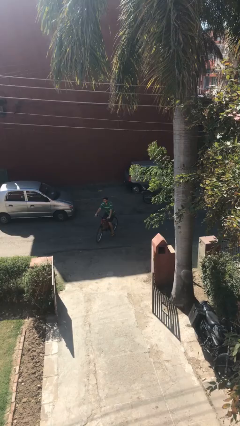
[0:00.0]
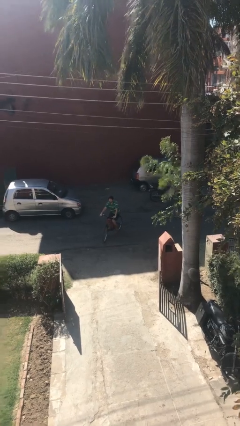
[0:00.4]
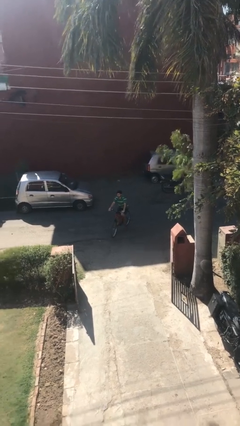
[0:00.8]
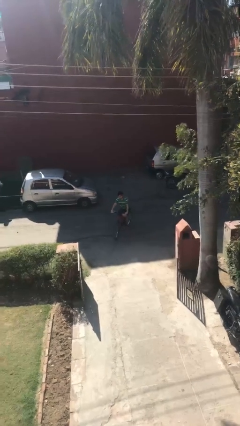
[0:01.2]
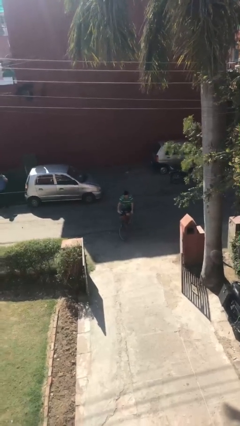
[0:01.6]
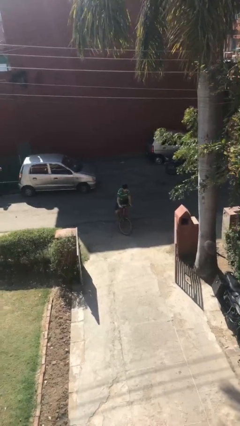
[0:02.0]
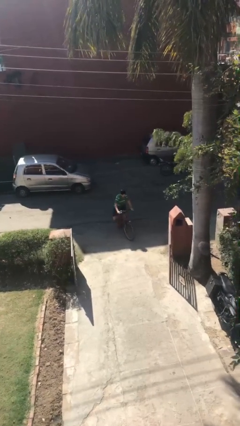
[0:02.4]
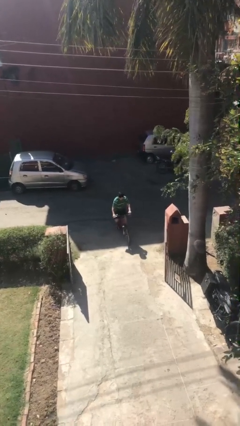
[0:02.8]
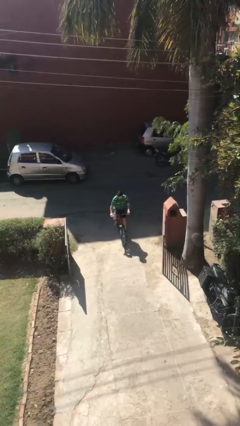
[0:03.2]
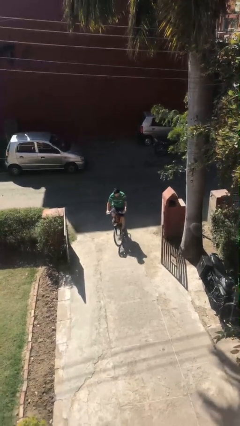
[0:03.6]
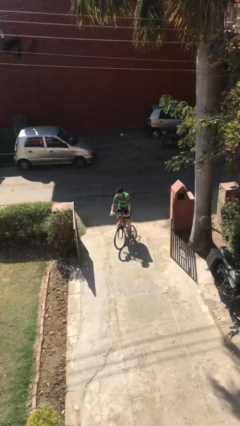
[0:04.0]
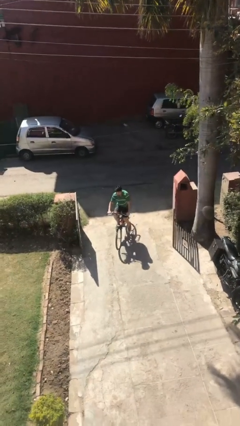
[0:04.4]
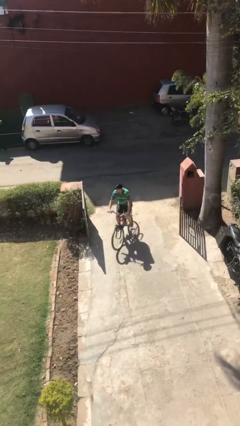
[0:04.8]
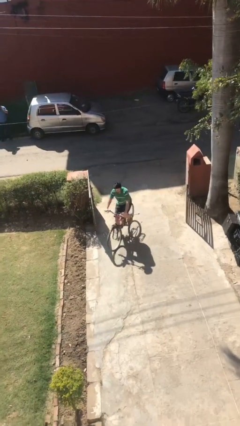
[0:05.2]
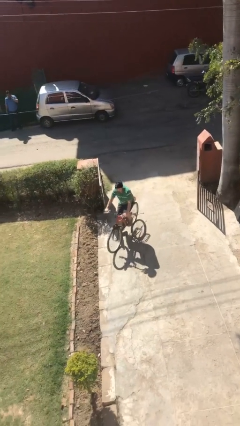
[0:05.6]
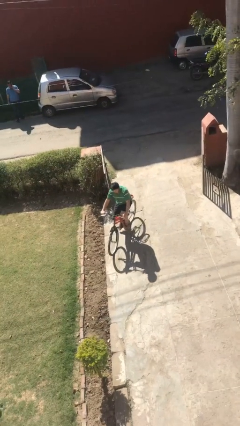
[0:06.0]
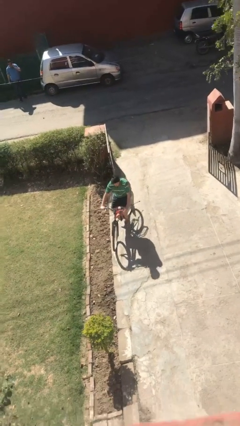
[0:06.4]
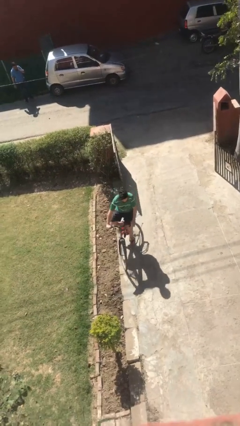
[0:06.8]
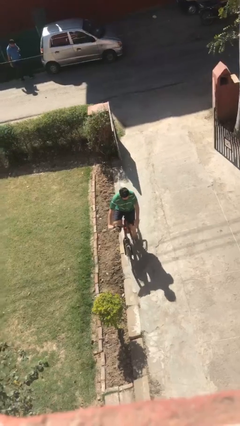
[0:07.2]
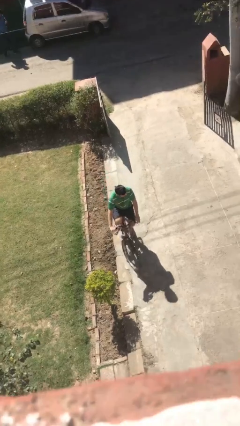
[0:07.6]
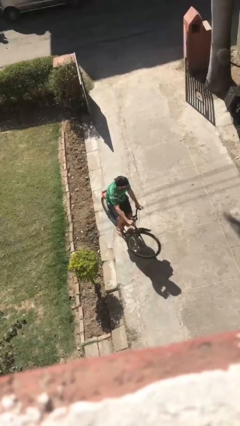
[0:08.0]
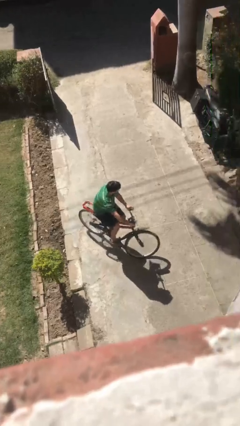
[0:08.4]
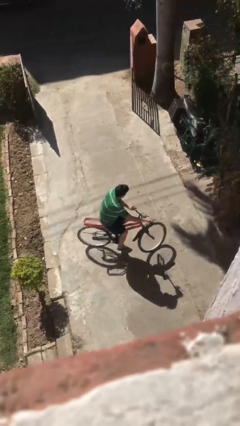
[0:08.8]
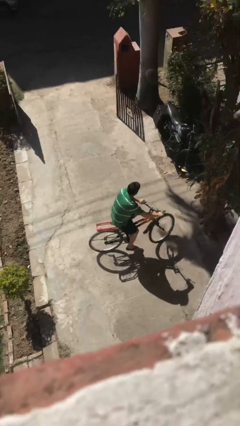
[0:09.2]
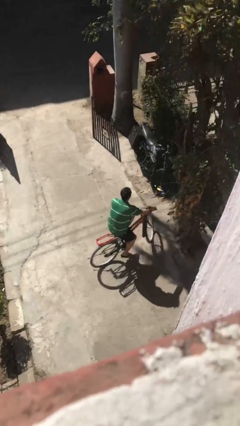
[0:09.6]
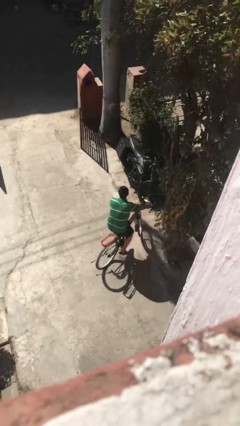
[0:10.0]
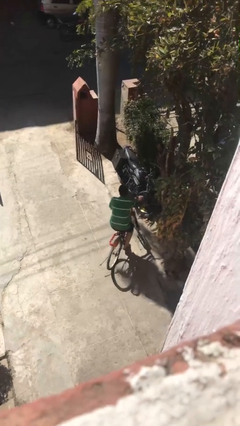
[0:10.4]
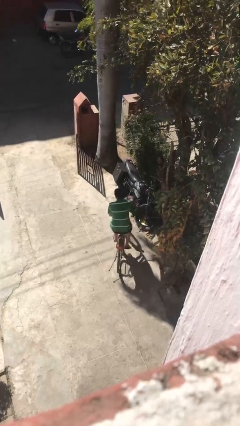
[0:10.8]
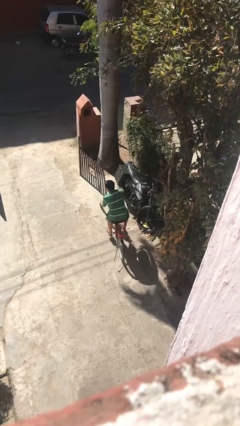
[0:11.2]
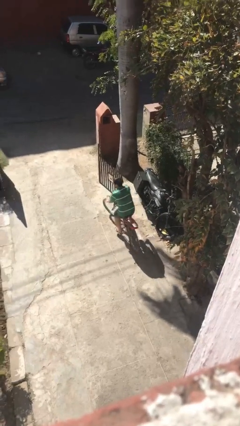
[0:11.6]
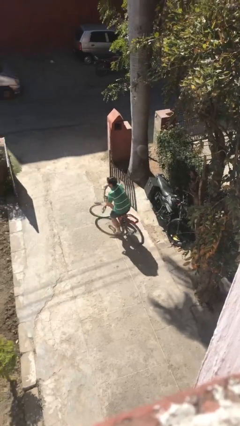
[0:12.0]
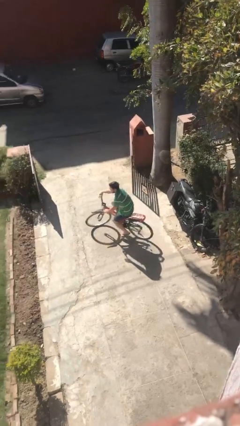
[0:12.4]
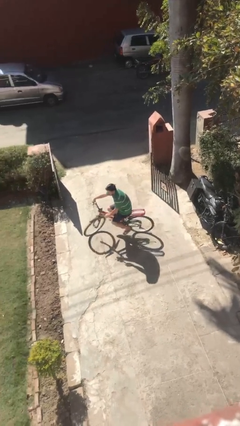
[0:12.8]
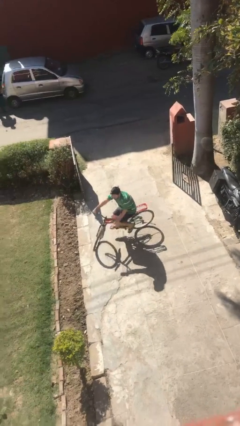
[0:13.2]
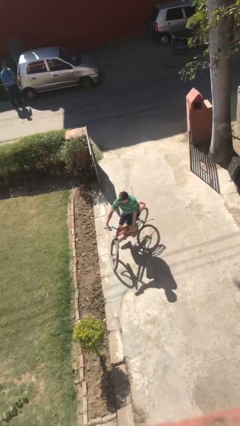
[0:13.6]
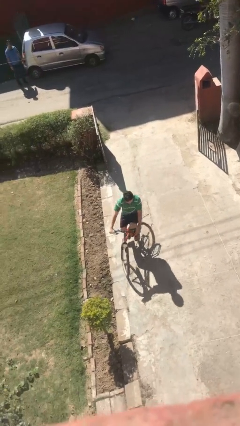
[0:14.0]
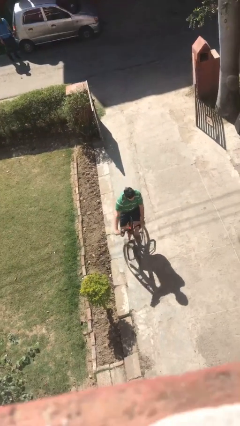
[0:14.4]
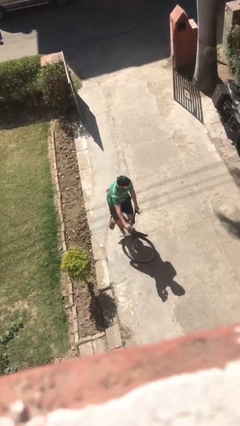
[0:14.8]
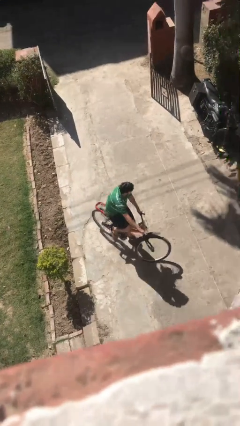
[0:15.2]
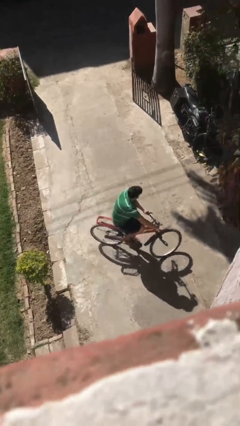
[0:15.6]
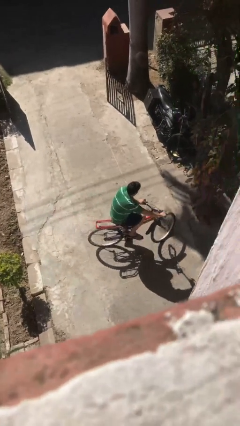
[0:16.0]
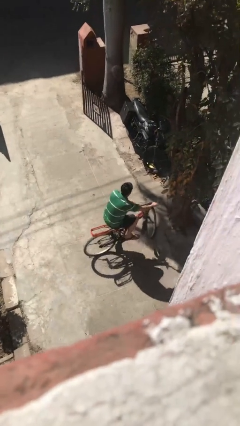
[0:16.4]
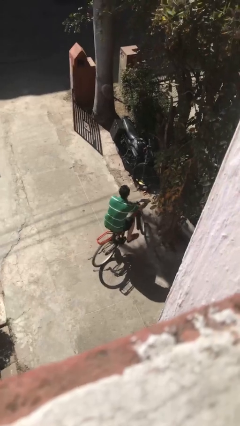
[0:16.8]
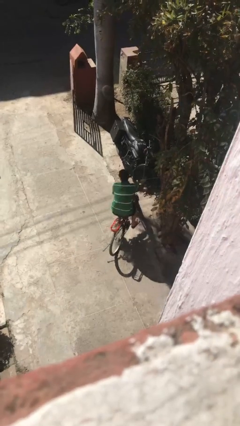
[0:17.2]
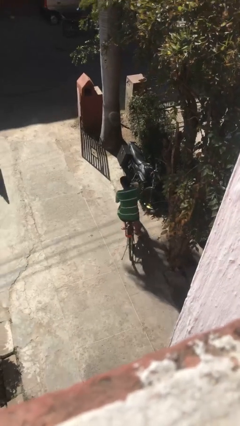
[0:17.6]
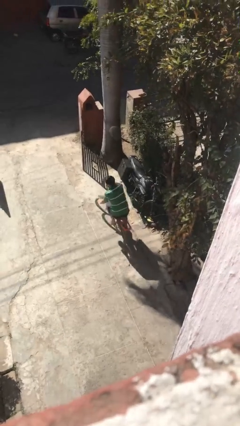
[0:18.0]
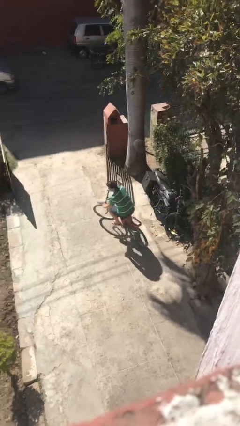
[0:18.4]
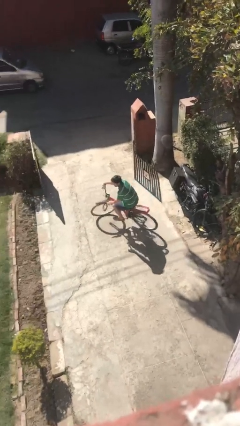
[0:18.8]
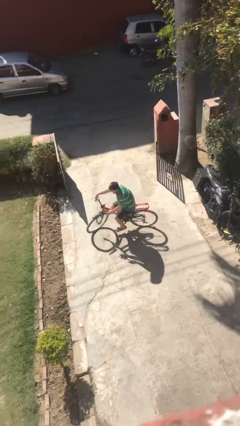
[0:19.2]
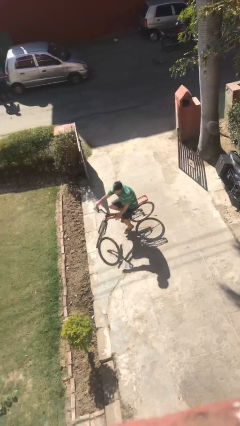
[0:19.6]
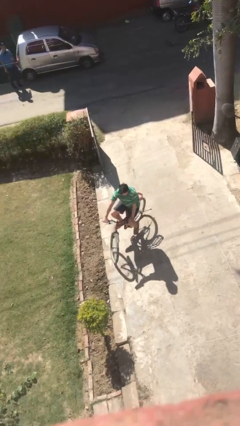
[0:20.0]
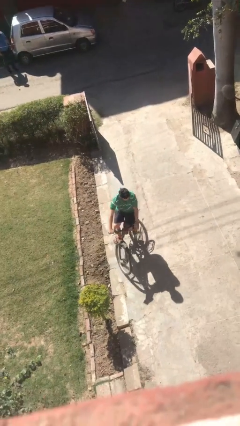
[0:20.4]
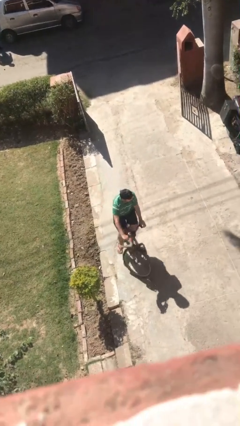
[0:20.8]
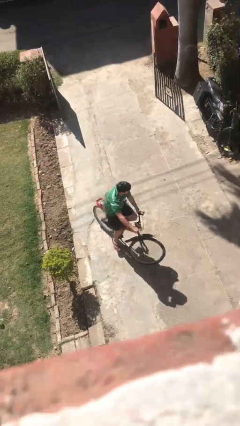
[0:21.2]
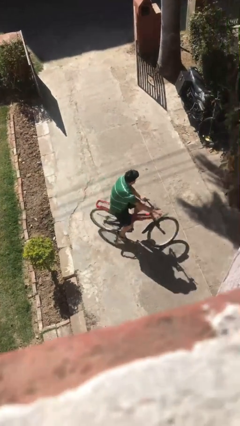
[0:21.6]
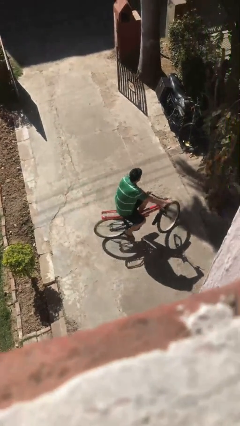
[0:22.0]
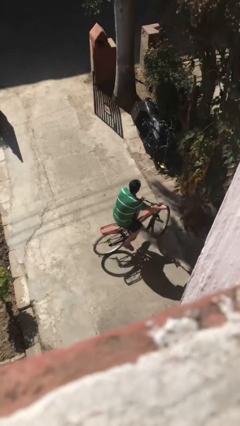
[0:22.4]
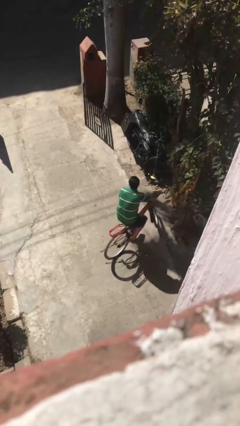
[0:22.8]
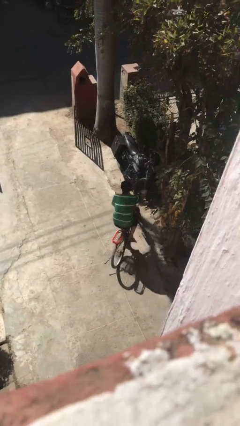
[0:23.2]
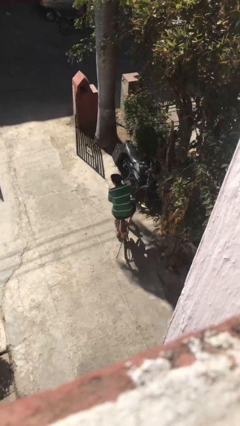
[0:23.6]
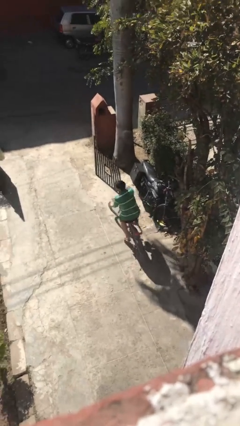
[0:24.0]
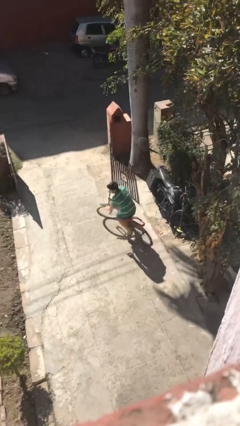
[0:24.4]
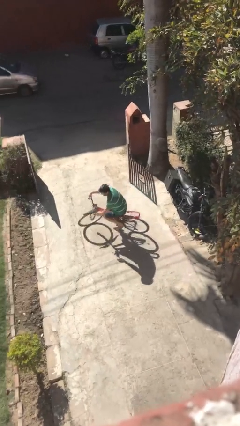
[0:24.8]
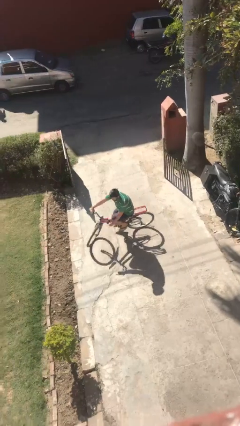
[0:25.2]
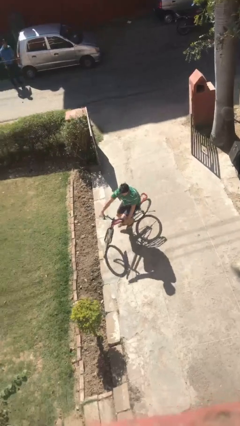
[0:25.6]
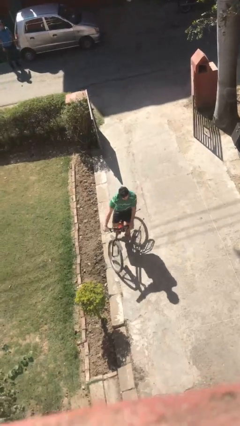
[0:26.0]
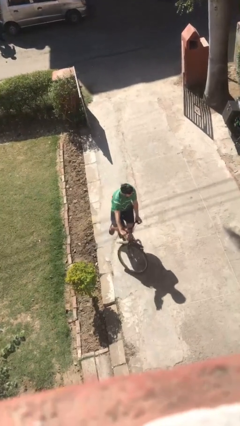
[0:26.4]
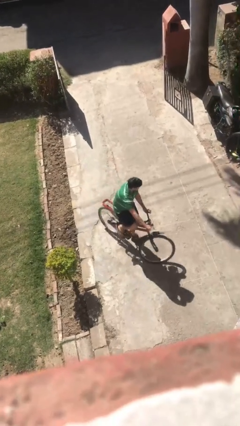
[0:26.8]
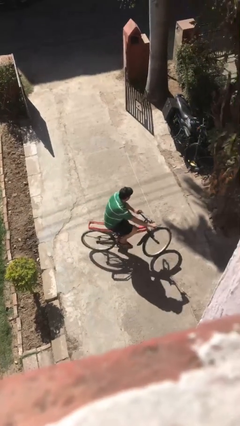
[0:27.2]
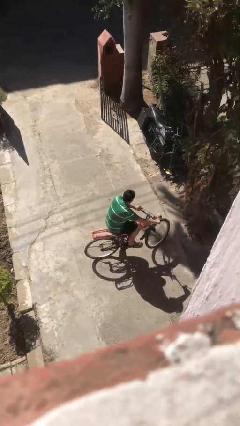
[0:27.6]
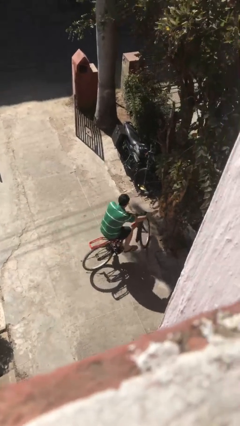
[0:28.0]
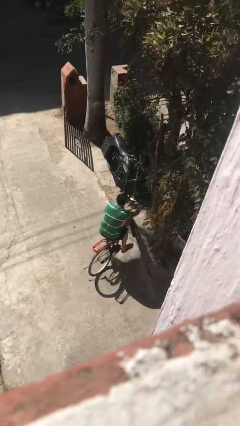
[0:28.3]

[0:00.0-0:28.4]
person rides bicycle

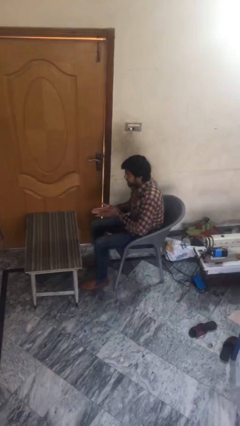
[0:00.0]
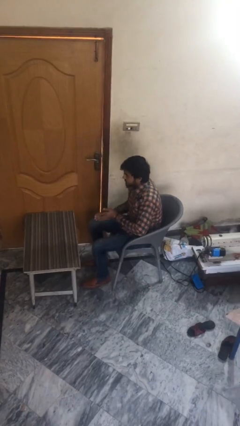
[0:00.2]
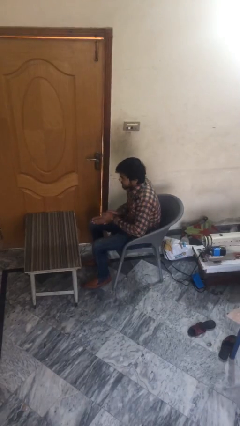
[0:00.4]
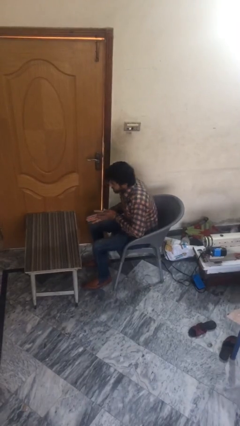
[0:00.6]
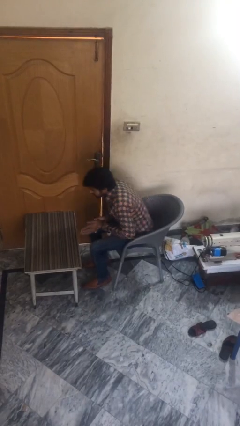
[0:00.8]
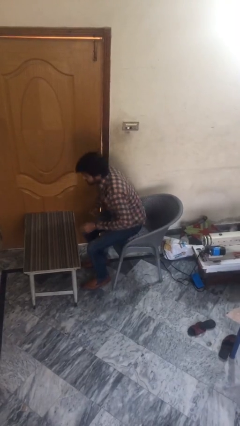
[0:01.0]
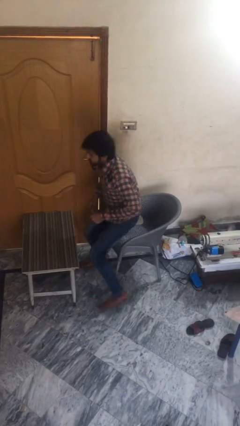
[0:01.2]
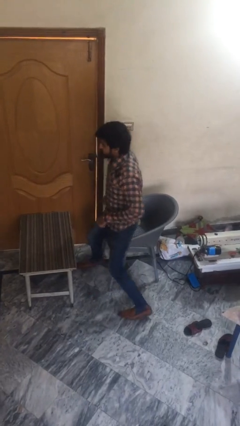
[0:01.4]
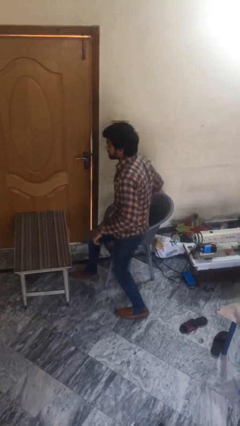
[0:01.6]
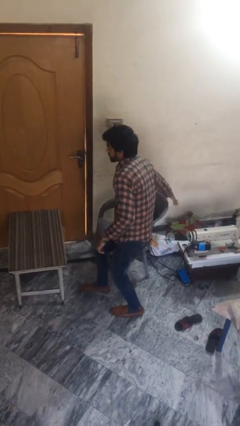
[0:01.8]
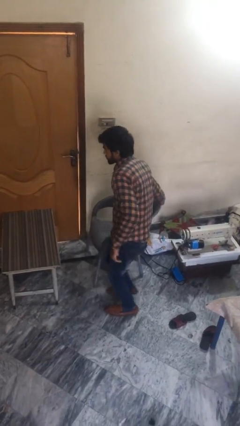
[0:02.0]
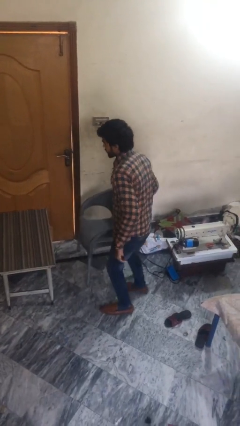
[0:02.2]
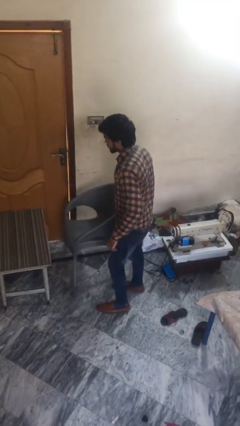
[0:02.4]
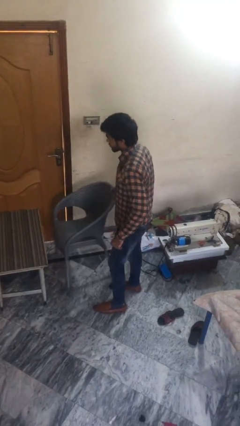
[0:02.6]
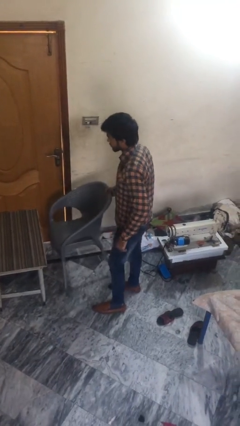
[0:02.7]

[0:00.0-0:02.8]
person stands up

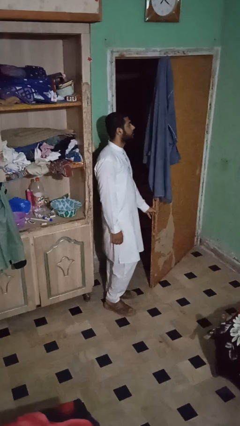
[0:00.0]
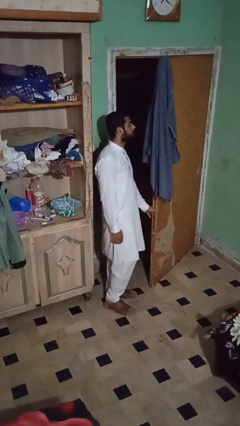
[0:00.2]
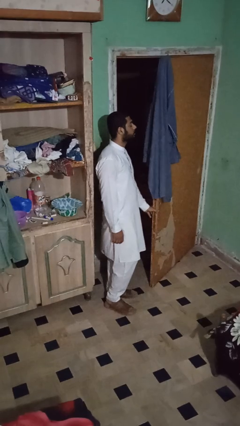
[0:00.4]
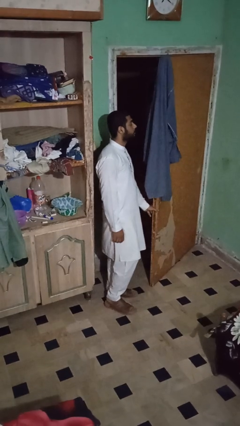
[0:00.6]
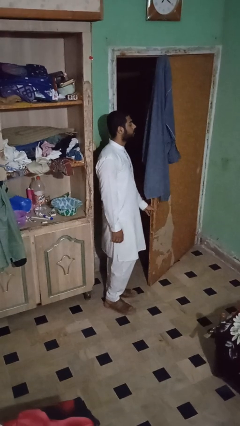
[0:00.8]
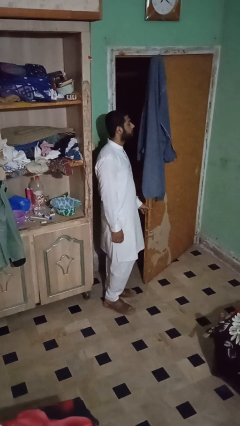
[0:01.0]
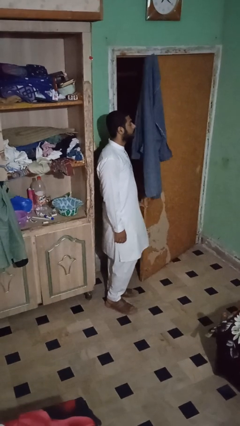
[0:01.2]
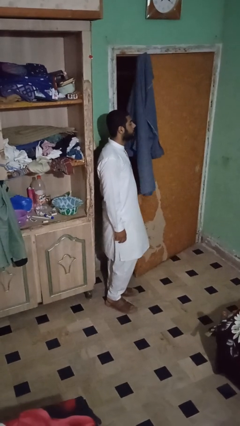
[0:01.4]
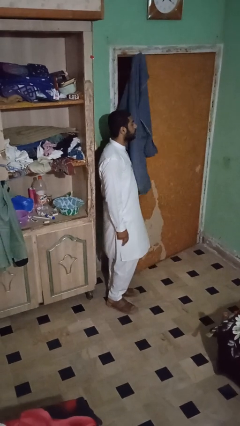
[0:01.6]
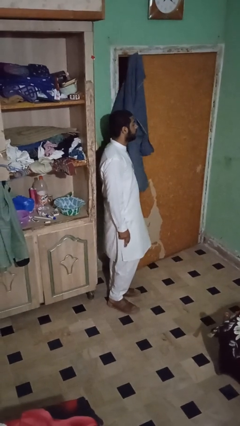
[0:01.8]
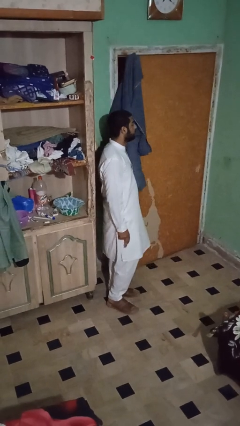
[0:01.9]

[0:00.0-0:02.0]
person closes closet door
